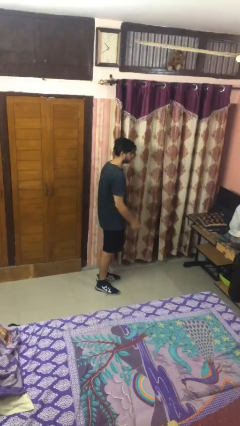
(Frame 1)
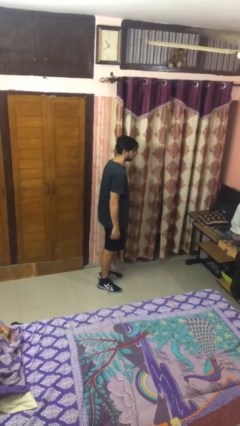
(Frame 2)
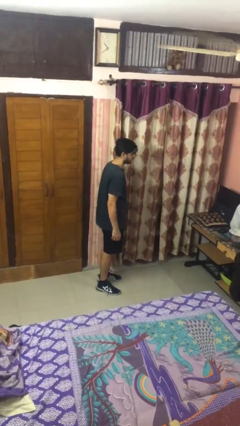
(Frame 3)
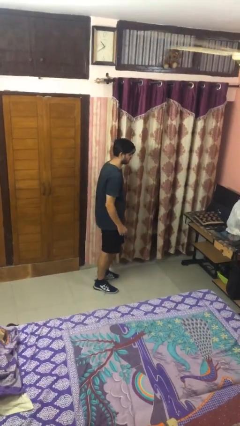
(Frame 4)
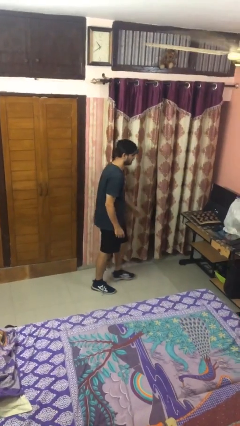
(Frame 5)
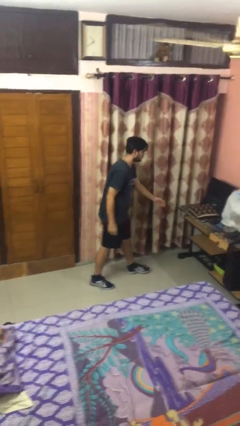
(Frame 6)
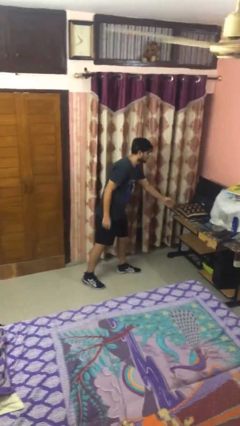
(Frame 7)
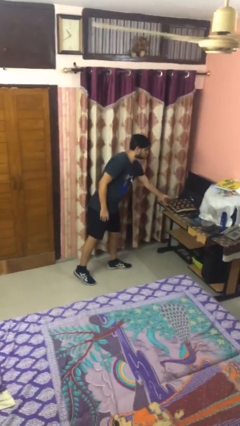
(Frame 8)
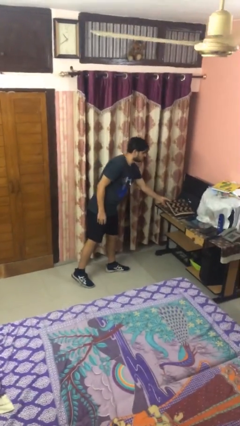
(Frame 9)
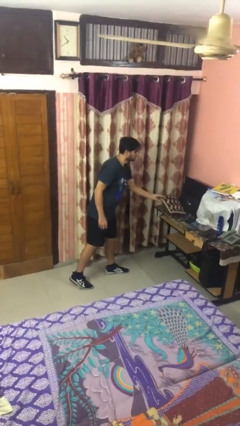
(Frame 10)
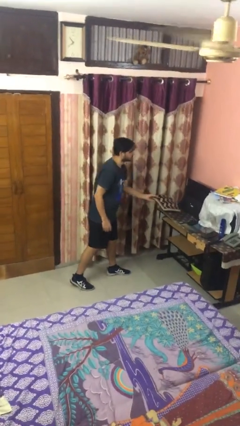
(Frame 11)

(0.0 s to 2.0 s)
person picks up object from table

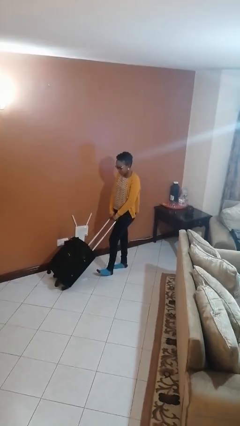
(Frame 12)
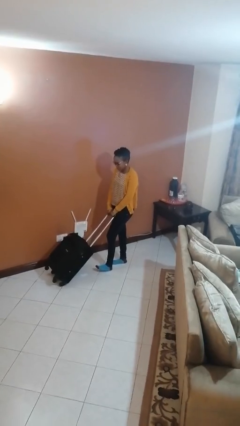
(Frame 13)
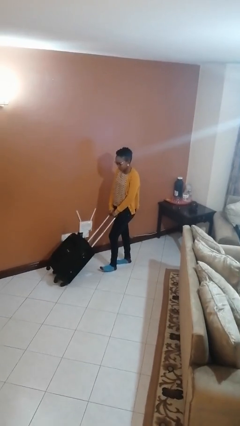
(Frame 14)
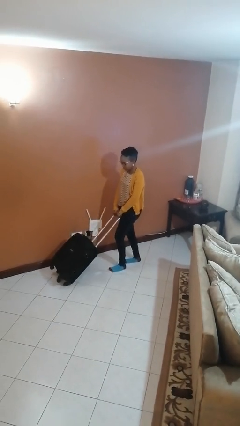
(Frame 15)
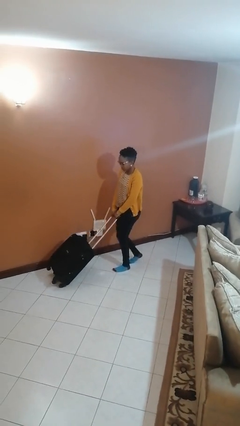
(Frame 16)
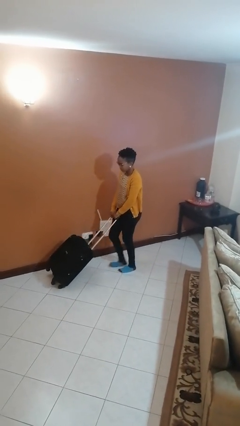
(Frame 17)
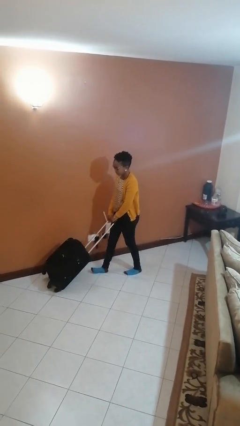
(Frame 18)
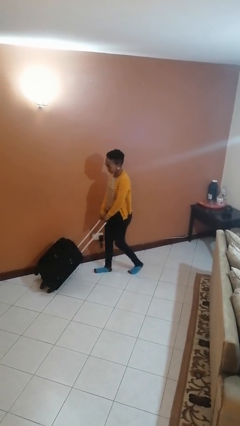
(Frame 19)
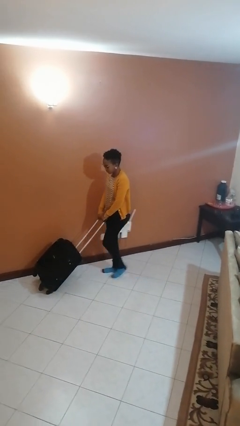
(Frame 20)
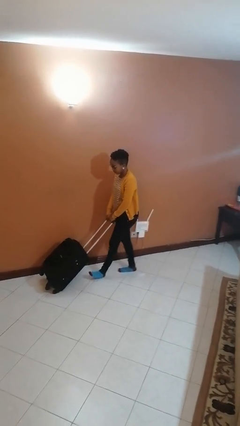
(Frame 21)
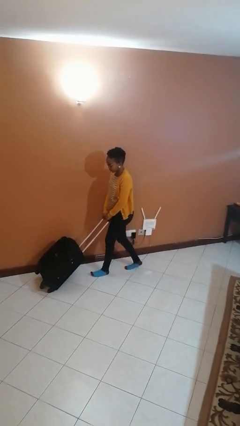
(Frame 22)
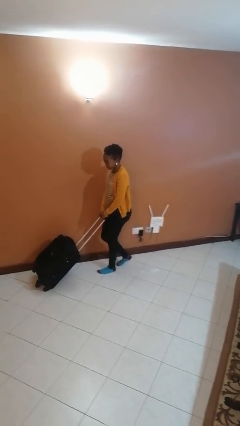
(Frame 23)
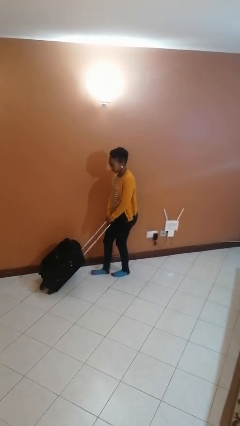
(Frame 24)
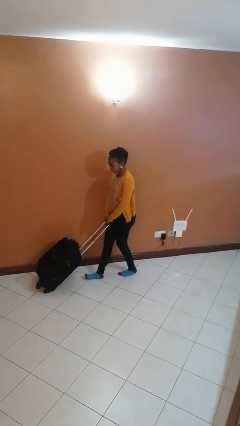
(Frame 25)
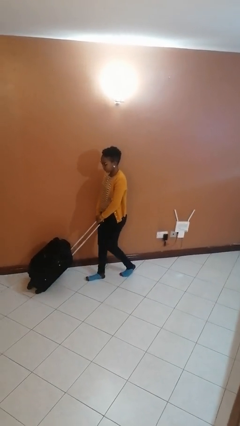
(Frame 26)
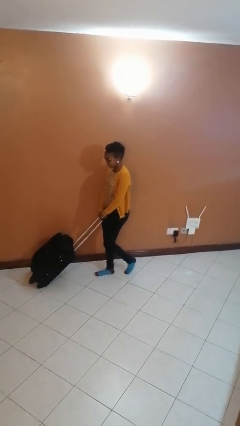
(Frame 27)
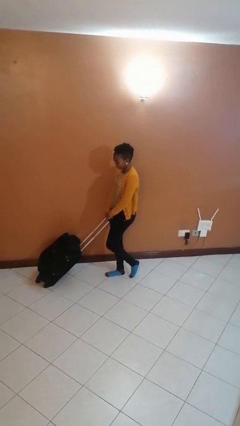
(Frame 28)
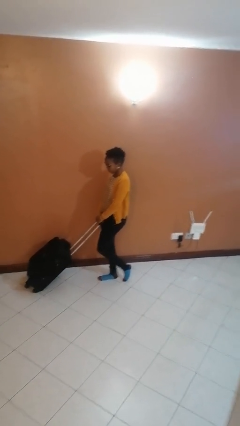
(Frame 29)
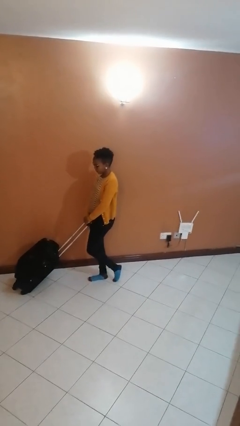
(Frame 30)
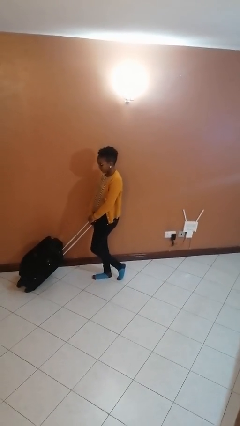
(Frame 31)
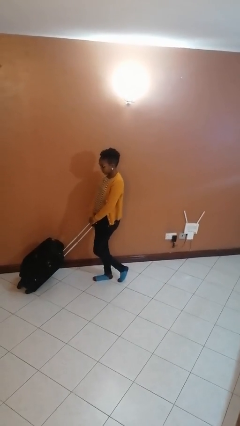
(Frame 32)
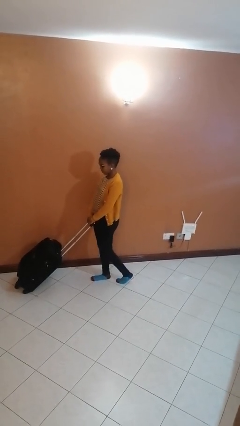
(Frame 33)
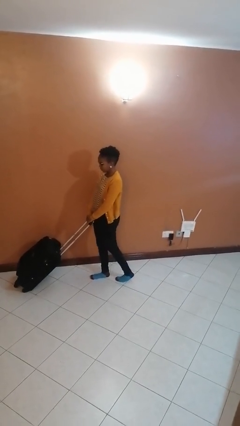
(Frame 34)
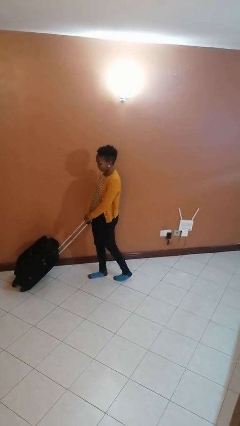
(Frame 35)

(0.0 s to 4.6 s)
person pushes wheeled cart

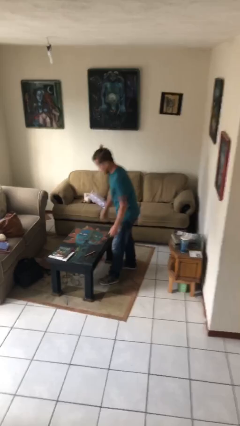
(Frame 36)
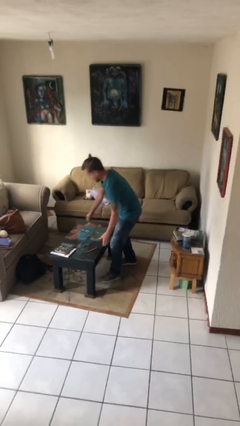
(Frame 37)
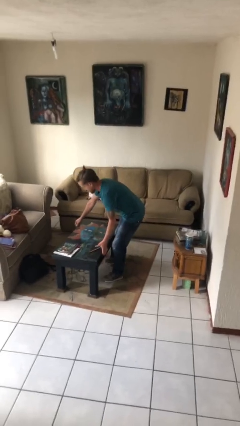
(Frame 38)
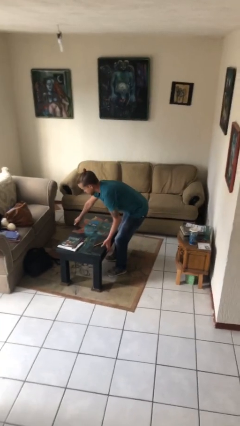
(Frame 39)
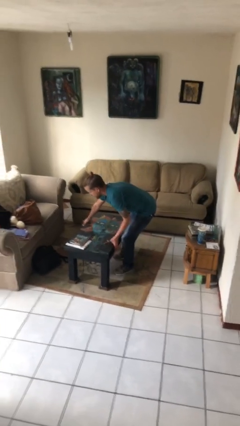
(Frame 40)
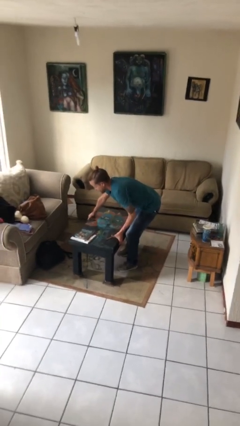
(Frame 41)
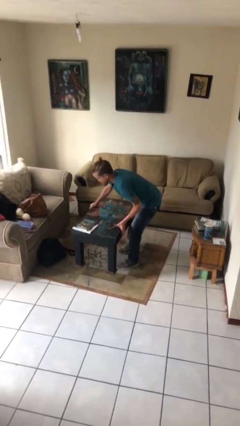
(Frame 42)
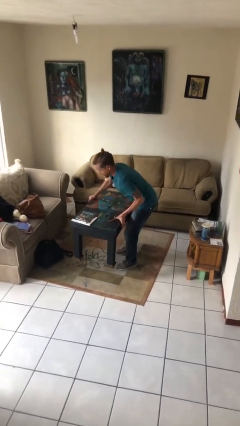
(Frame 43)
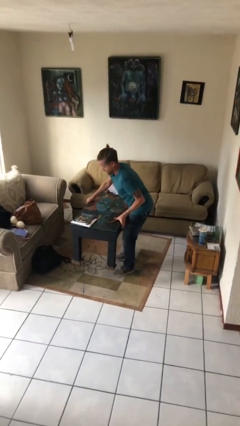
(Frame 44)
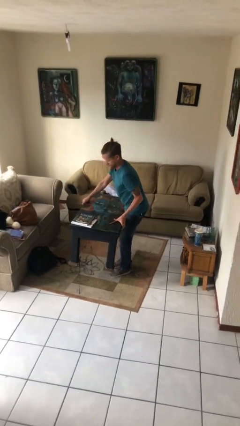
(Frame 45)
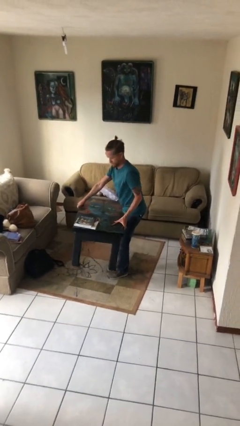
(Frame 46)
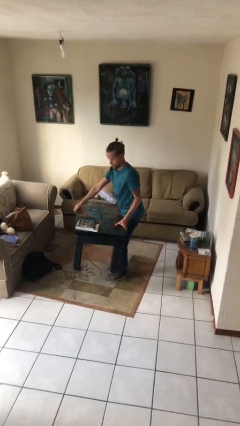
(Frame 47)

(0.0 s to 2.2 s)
person picks up object from floor

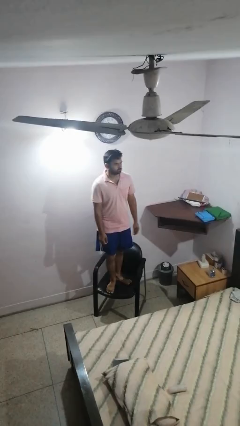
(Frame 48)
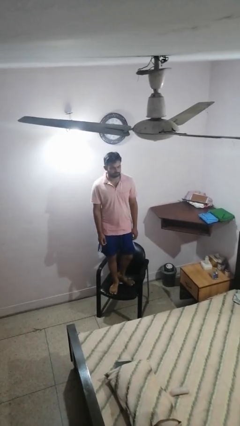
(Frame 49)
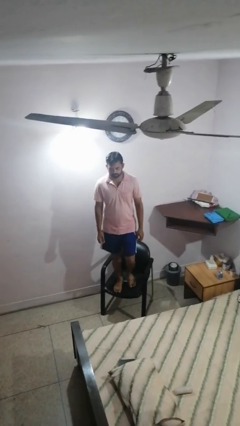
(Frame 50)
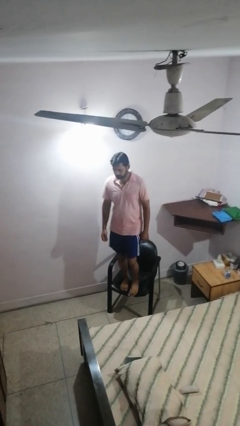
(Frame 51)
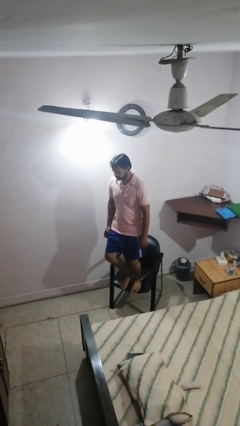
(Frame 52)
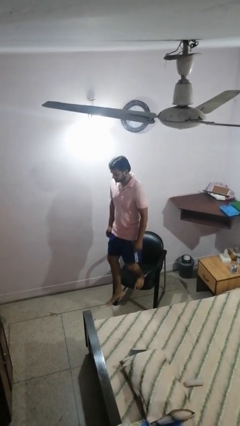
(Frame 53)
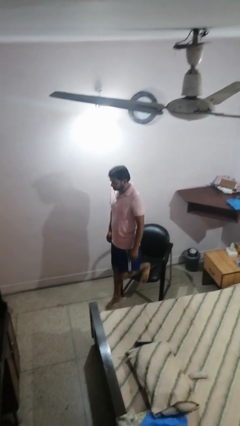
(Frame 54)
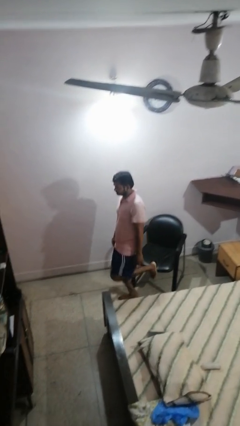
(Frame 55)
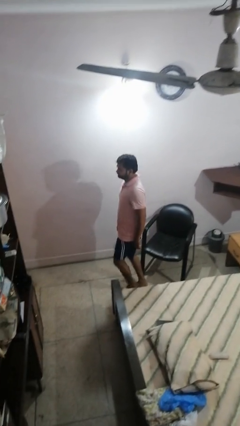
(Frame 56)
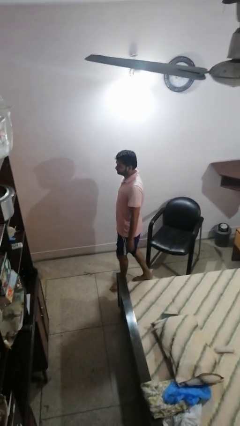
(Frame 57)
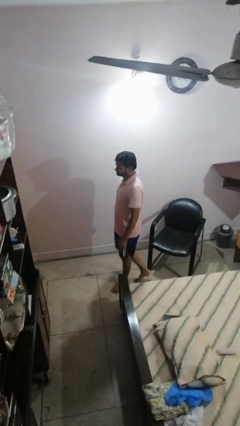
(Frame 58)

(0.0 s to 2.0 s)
person climbs off chair

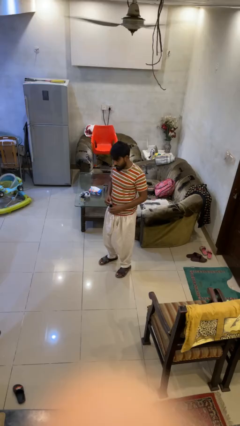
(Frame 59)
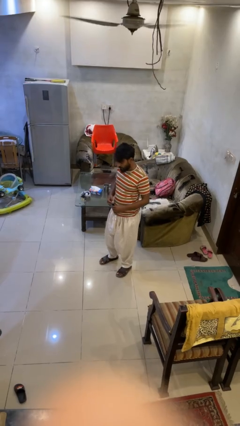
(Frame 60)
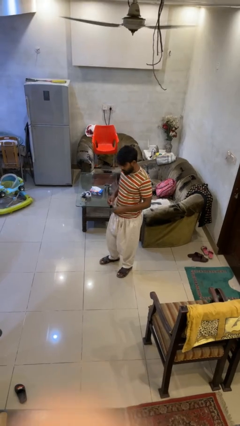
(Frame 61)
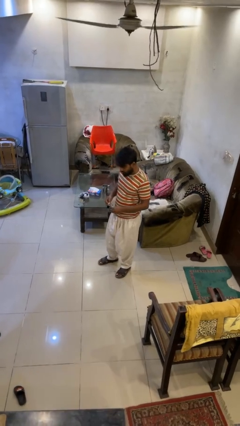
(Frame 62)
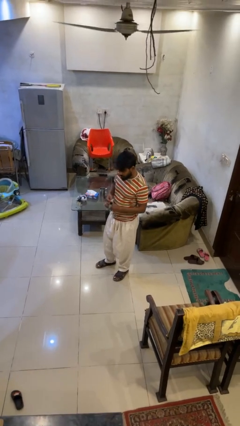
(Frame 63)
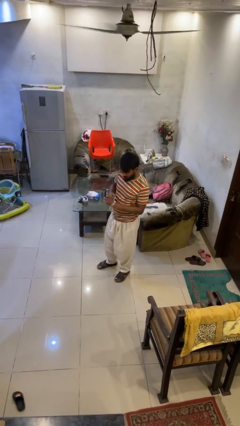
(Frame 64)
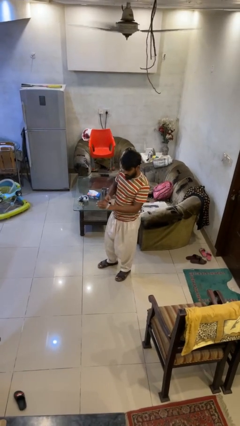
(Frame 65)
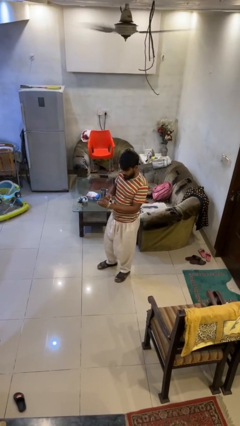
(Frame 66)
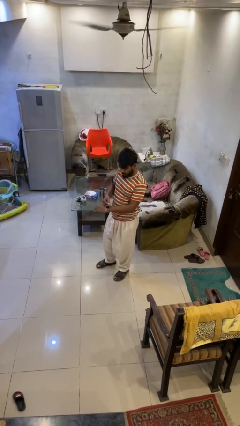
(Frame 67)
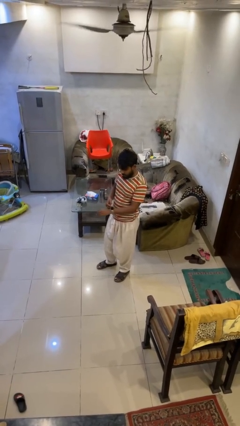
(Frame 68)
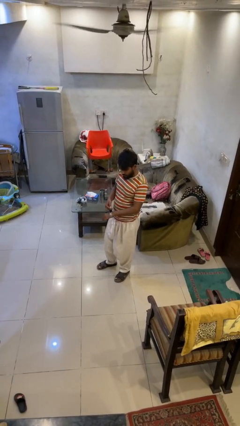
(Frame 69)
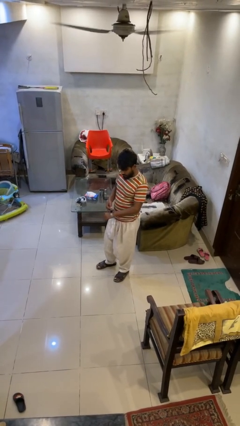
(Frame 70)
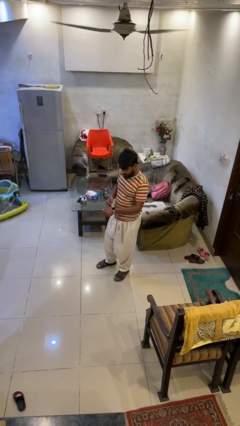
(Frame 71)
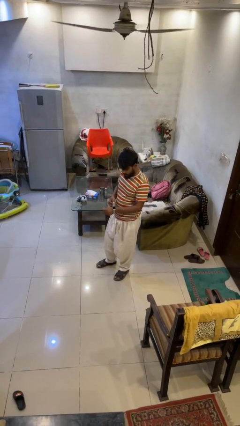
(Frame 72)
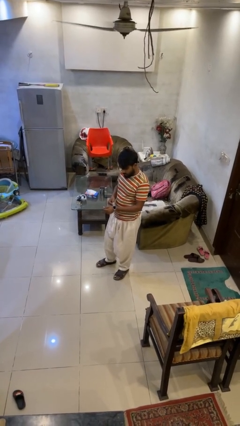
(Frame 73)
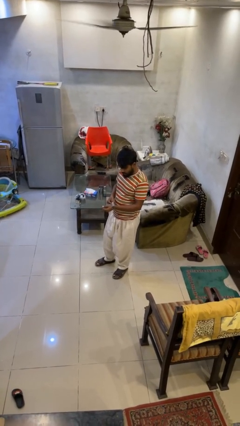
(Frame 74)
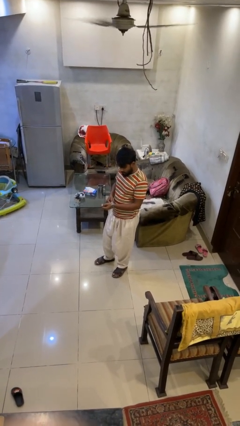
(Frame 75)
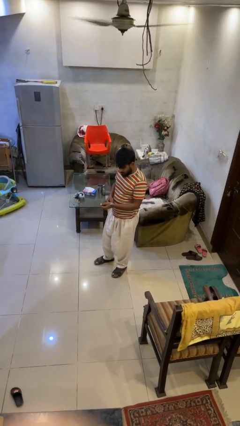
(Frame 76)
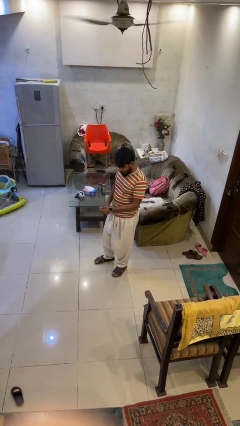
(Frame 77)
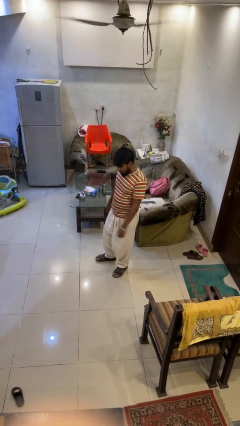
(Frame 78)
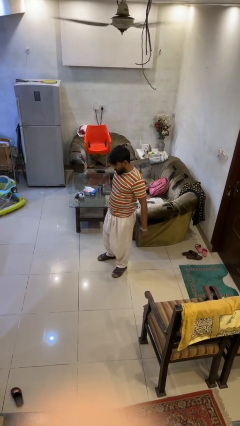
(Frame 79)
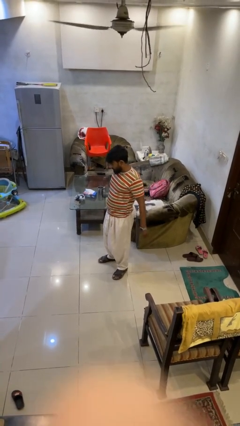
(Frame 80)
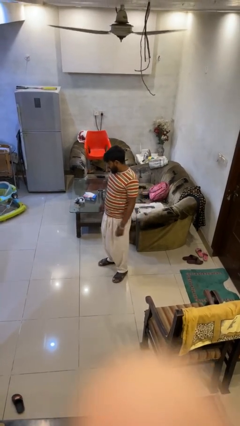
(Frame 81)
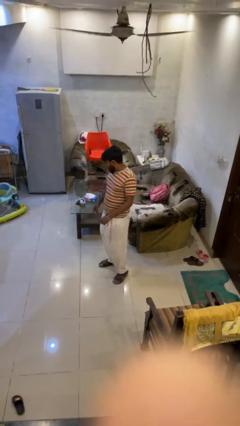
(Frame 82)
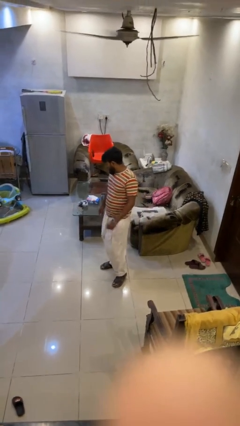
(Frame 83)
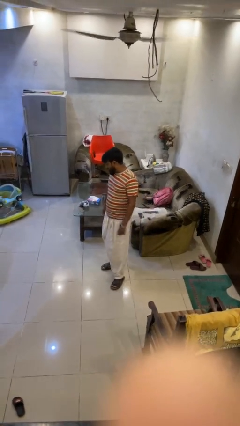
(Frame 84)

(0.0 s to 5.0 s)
person puts on wristwatch

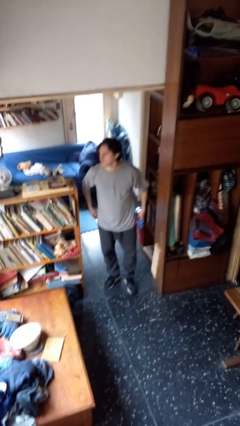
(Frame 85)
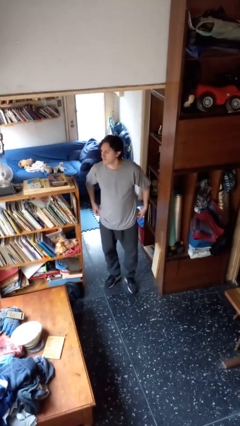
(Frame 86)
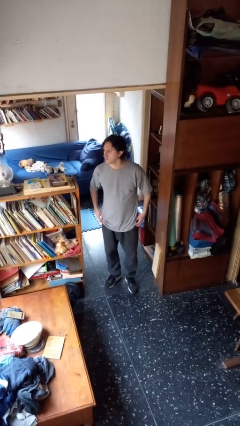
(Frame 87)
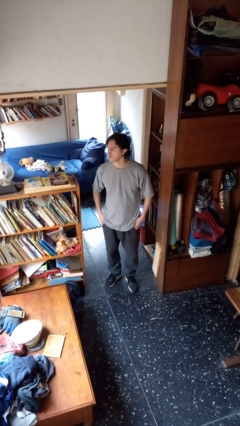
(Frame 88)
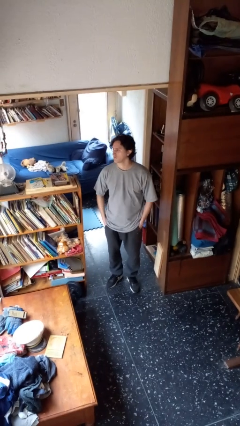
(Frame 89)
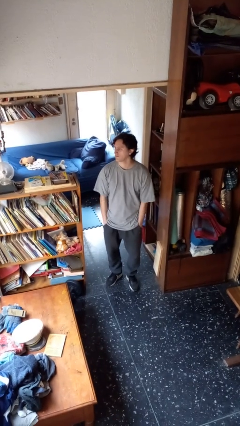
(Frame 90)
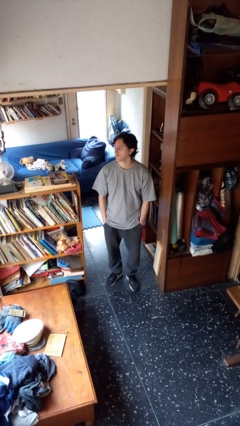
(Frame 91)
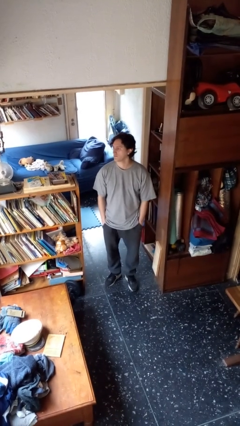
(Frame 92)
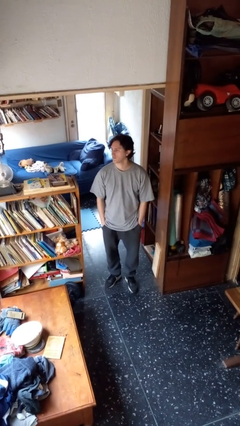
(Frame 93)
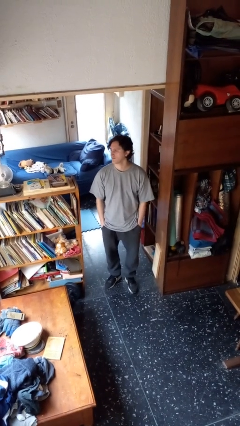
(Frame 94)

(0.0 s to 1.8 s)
person puts hands in back pockets
